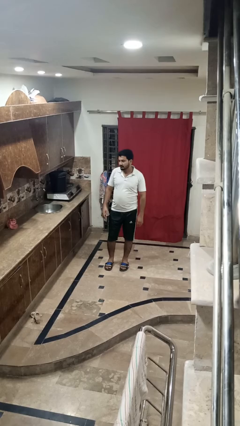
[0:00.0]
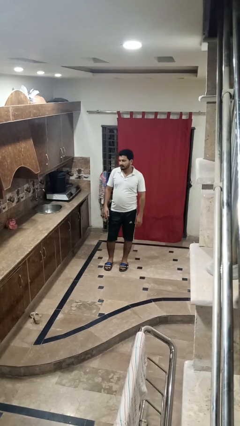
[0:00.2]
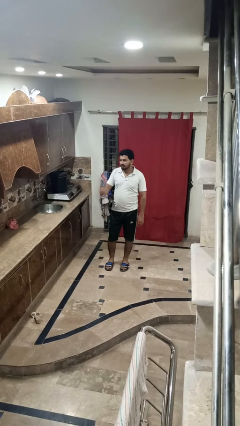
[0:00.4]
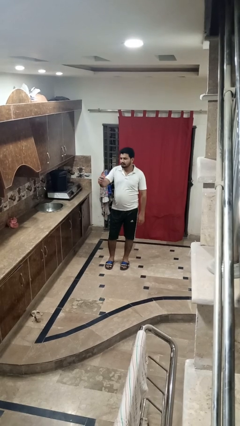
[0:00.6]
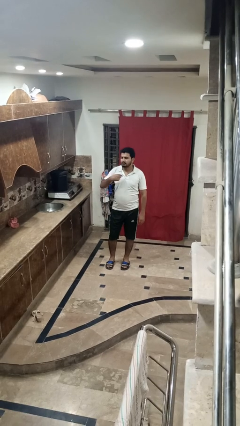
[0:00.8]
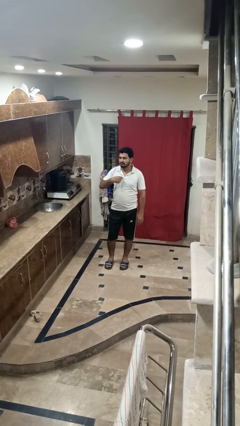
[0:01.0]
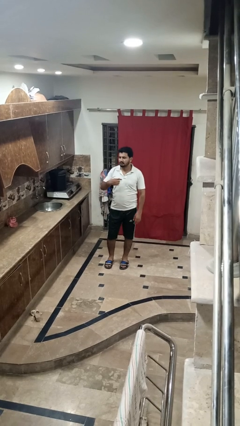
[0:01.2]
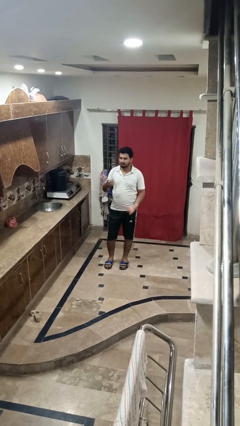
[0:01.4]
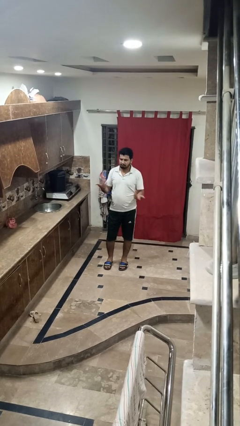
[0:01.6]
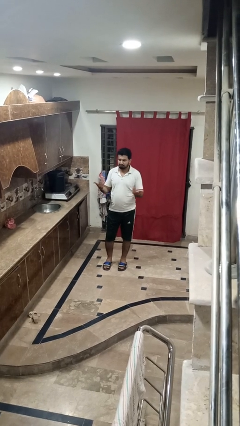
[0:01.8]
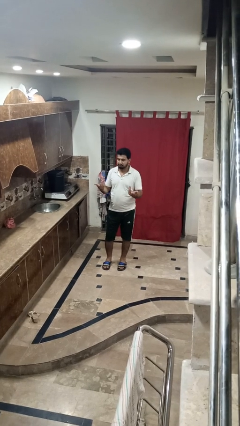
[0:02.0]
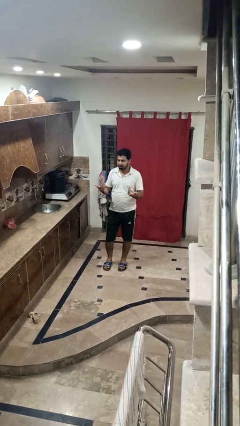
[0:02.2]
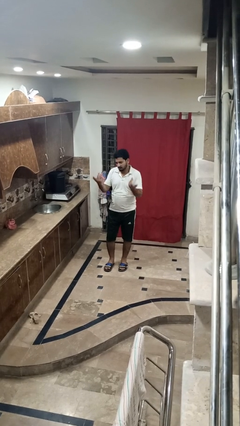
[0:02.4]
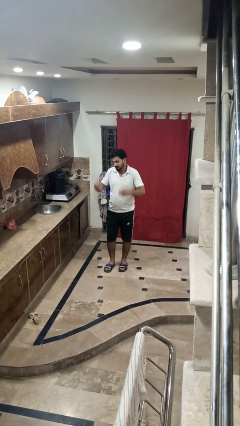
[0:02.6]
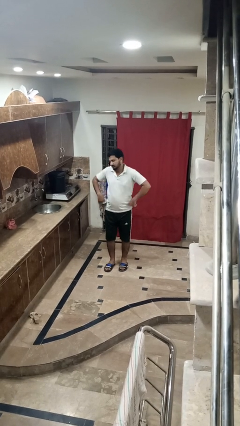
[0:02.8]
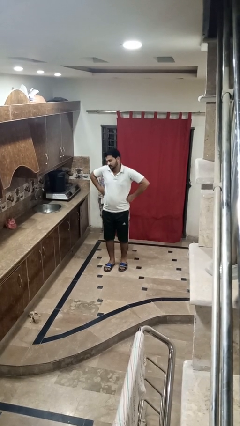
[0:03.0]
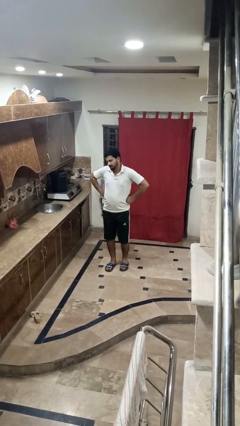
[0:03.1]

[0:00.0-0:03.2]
person shrugs

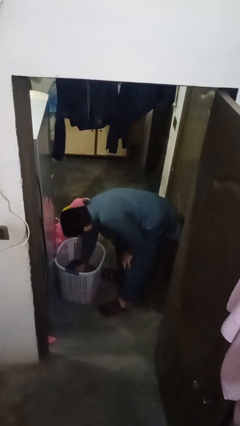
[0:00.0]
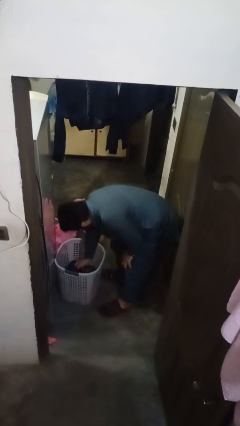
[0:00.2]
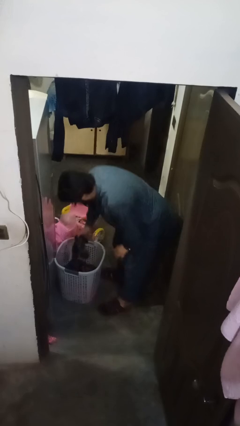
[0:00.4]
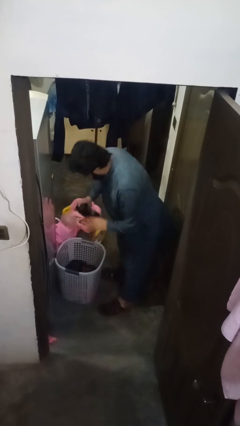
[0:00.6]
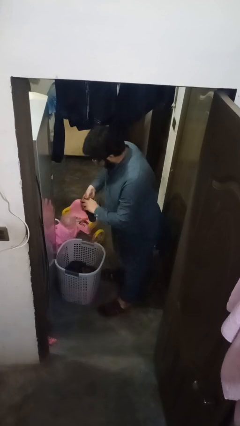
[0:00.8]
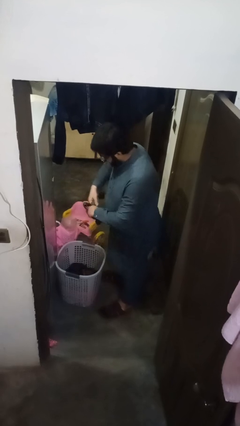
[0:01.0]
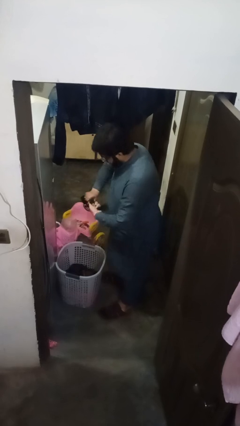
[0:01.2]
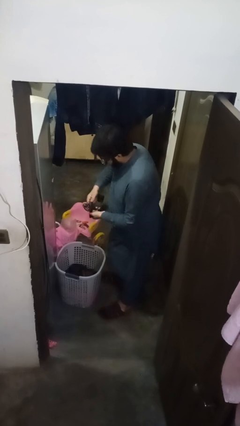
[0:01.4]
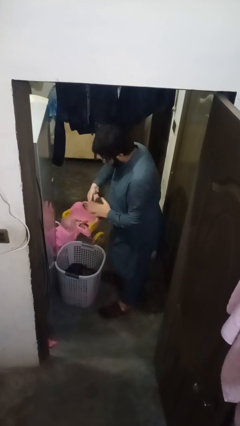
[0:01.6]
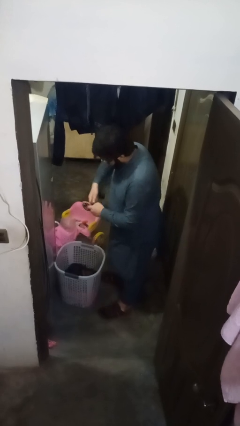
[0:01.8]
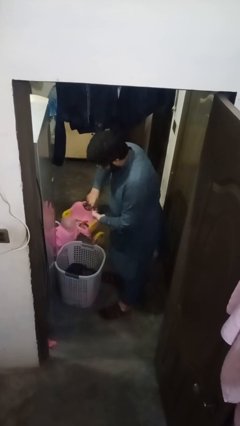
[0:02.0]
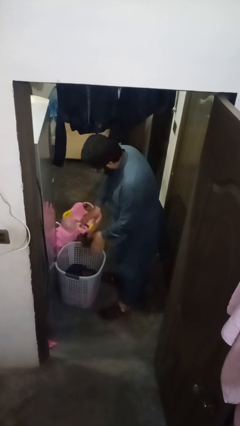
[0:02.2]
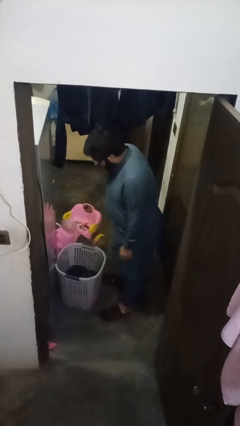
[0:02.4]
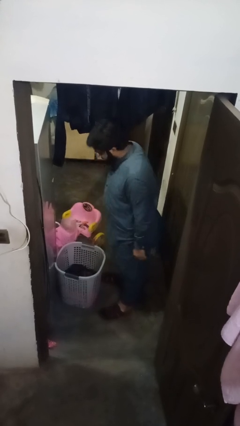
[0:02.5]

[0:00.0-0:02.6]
person folds socks

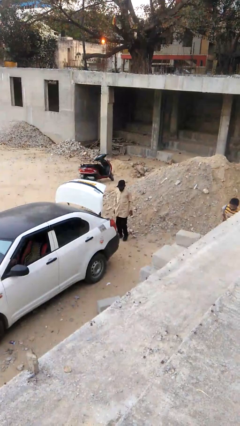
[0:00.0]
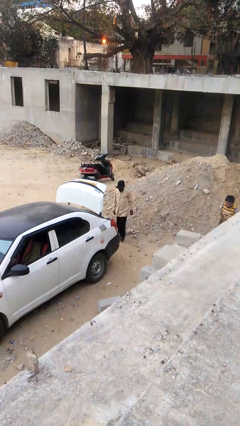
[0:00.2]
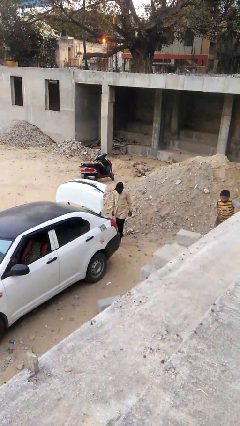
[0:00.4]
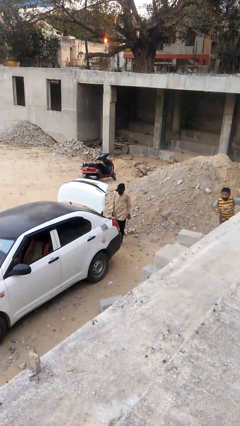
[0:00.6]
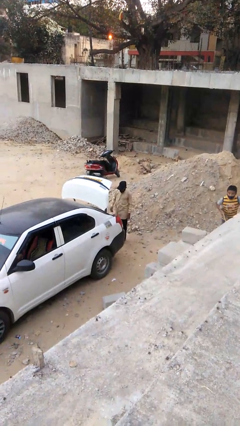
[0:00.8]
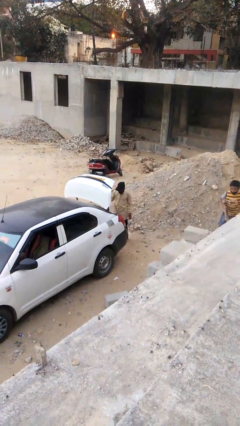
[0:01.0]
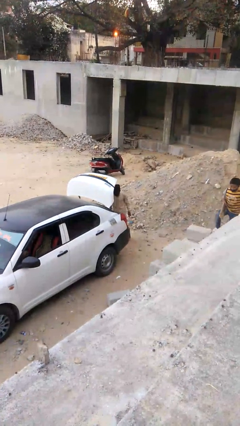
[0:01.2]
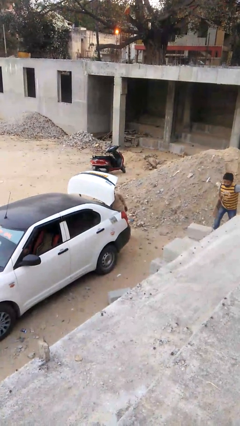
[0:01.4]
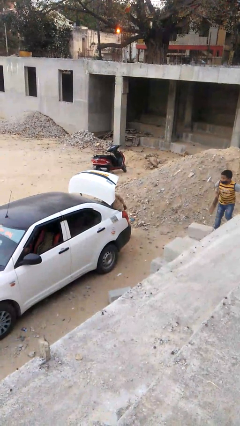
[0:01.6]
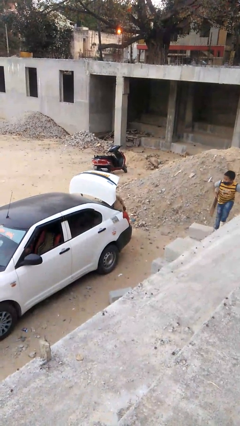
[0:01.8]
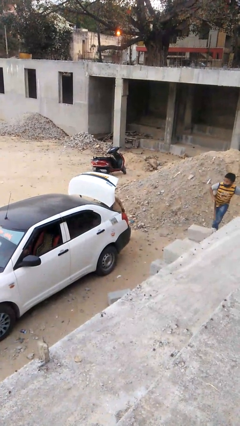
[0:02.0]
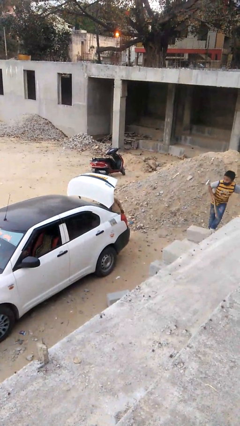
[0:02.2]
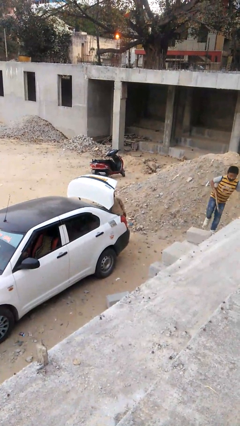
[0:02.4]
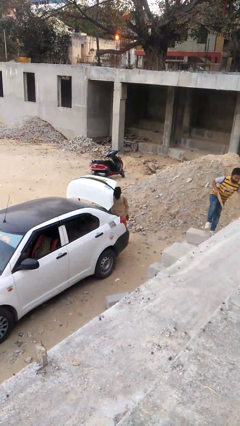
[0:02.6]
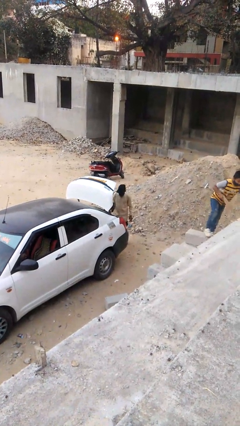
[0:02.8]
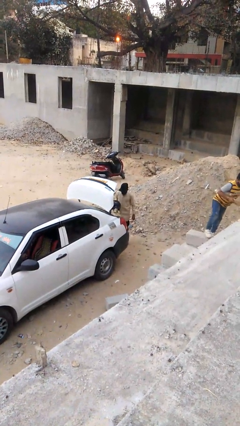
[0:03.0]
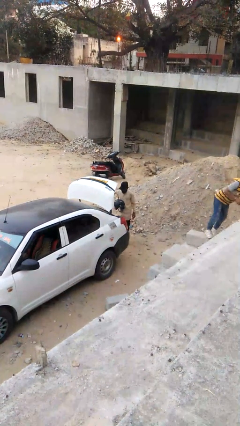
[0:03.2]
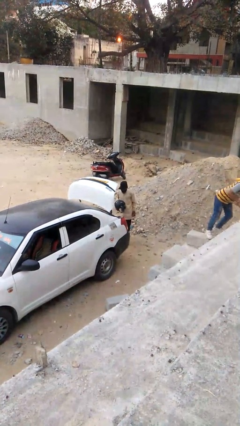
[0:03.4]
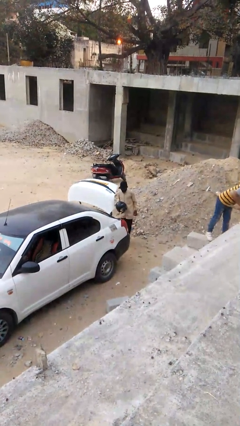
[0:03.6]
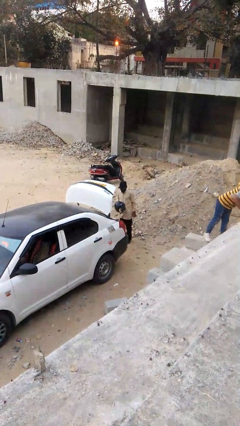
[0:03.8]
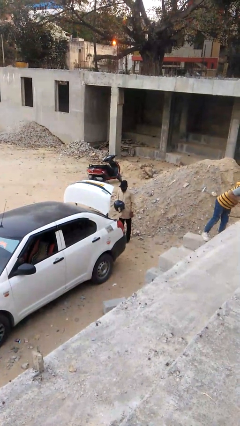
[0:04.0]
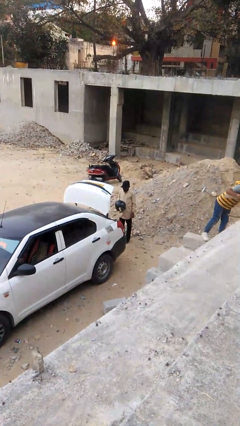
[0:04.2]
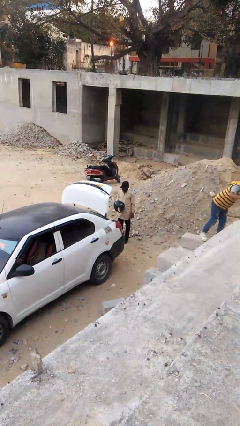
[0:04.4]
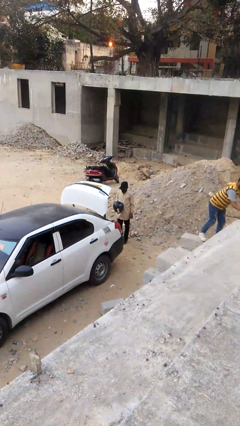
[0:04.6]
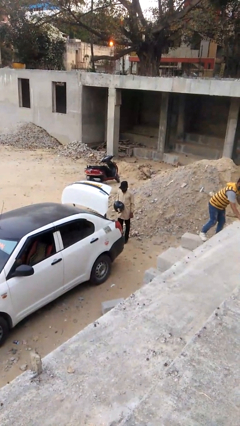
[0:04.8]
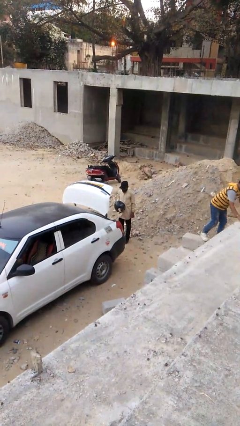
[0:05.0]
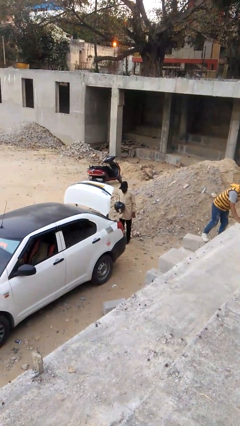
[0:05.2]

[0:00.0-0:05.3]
person unloads car

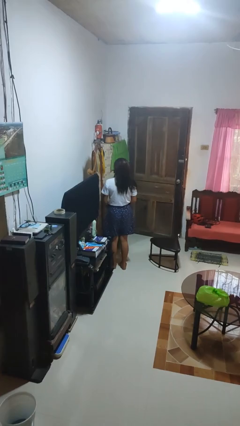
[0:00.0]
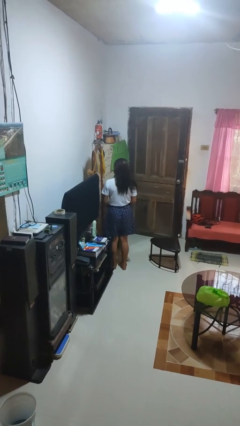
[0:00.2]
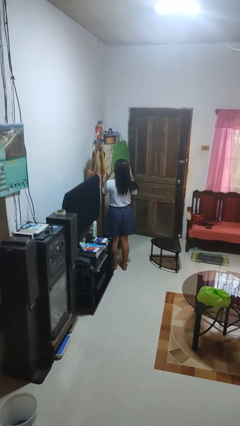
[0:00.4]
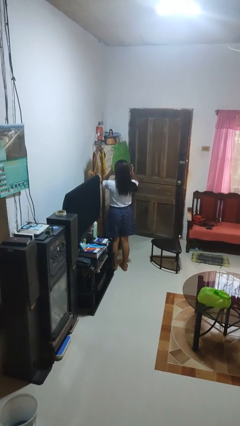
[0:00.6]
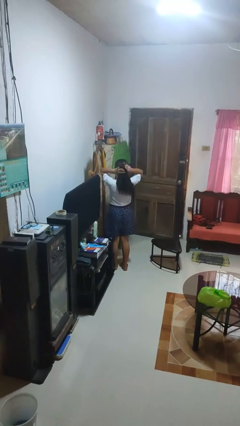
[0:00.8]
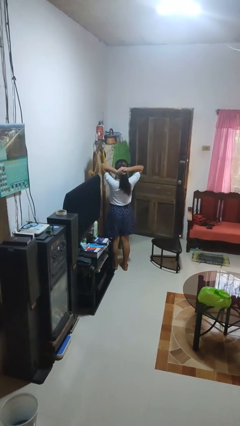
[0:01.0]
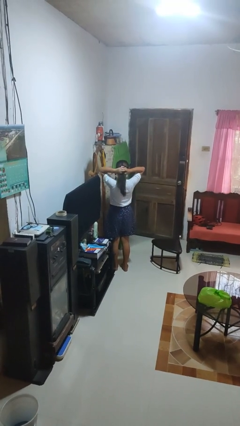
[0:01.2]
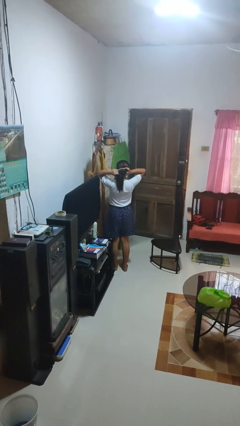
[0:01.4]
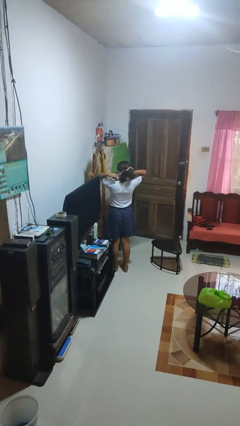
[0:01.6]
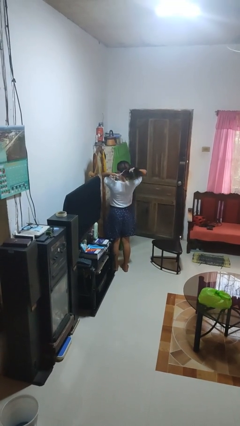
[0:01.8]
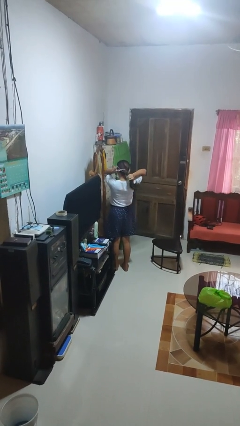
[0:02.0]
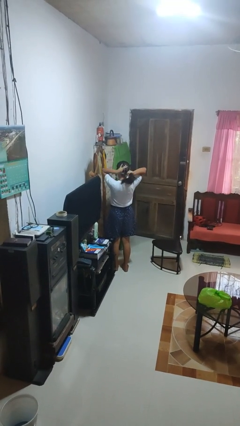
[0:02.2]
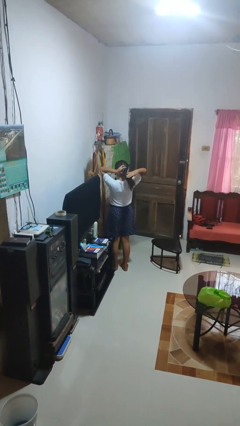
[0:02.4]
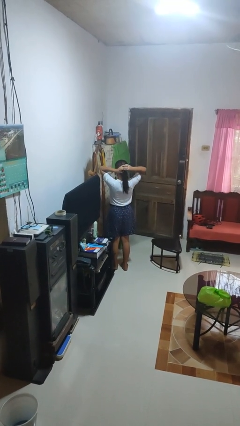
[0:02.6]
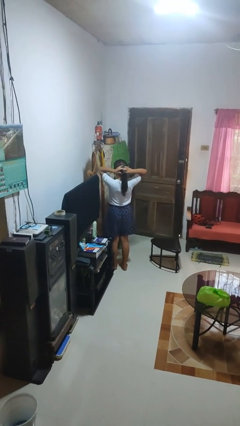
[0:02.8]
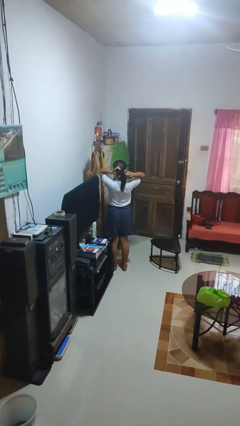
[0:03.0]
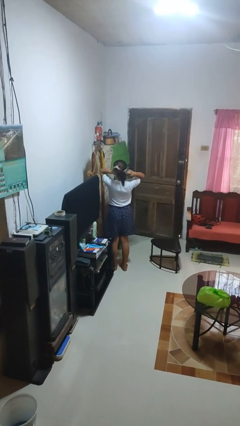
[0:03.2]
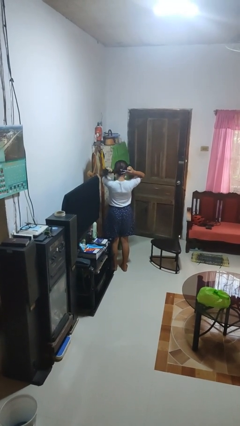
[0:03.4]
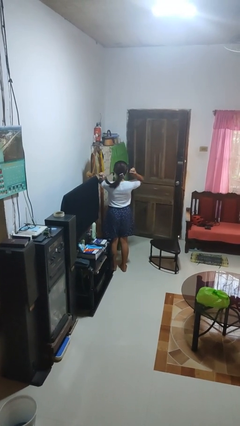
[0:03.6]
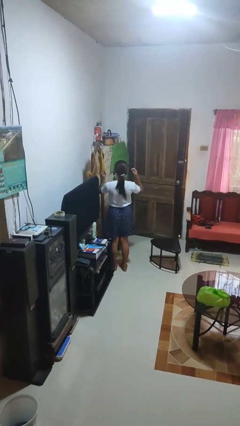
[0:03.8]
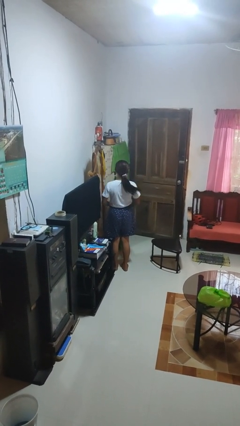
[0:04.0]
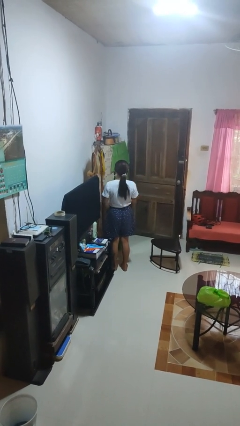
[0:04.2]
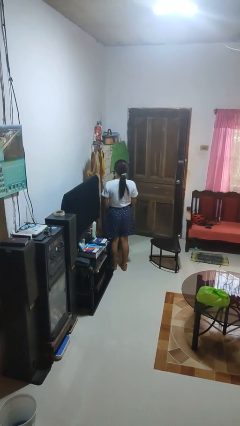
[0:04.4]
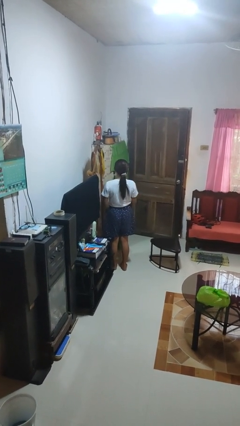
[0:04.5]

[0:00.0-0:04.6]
person puts hair in ponytail

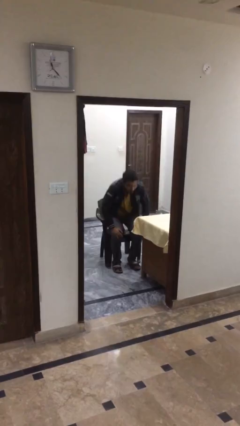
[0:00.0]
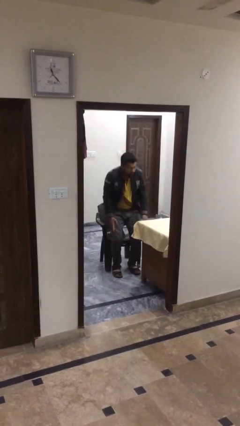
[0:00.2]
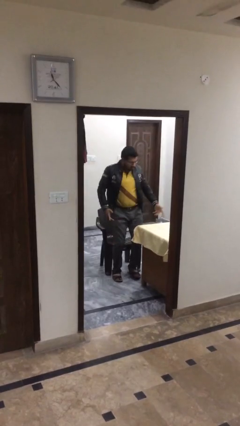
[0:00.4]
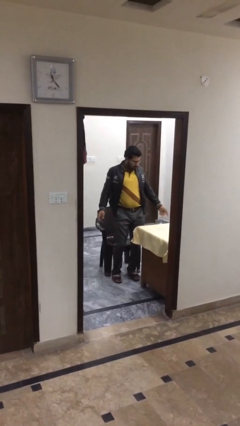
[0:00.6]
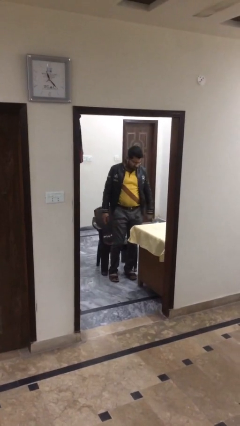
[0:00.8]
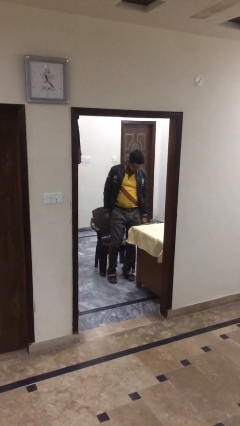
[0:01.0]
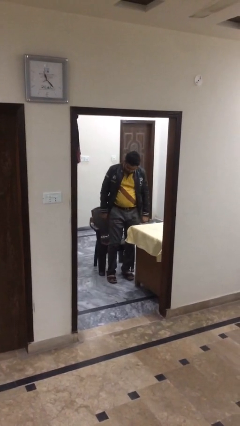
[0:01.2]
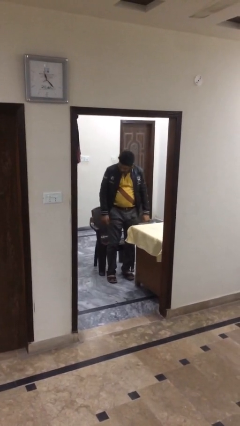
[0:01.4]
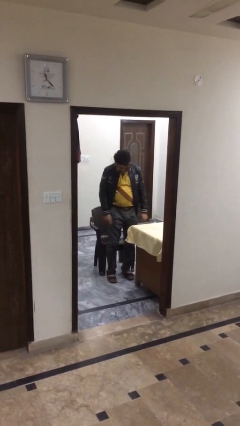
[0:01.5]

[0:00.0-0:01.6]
person stands up

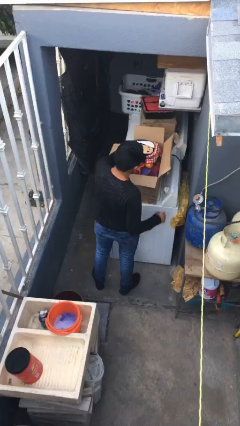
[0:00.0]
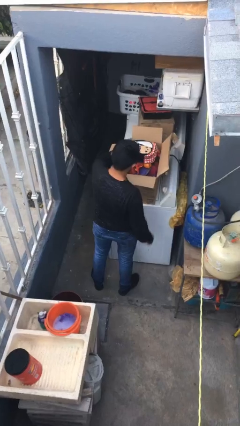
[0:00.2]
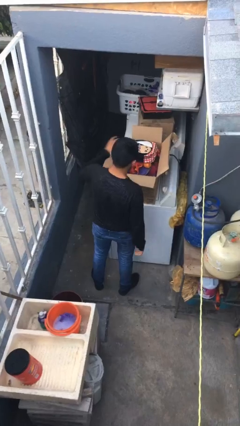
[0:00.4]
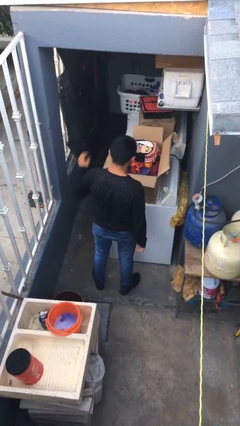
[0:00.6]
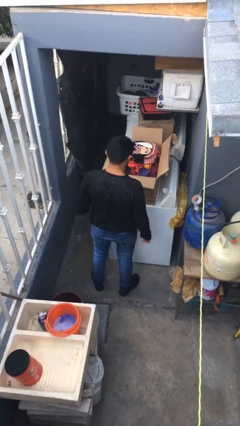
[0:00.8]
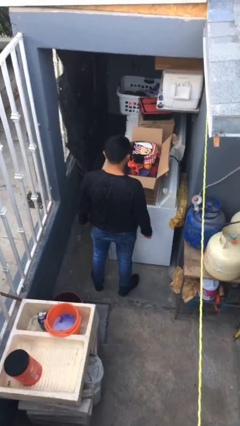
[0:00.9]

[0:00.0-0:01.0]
person puts object into box
